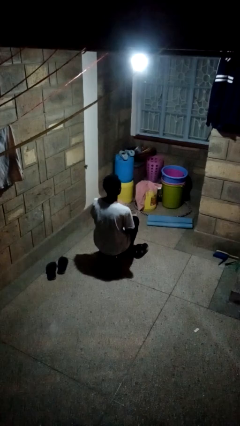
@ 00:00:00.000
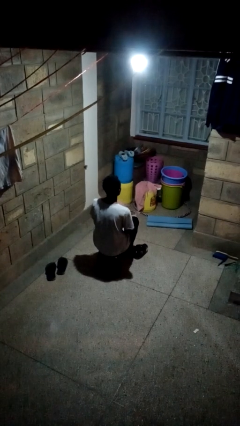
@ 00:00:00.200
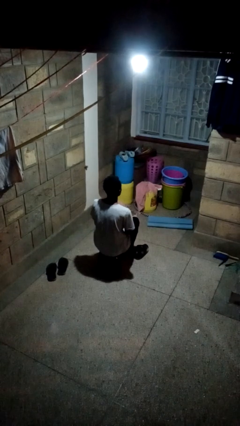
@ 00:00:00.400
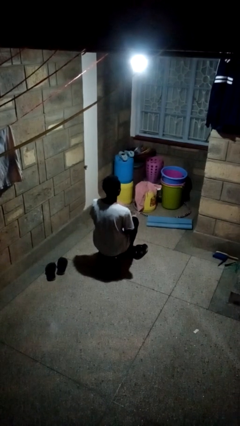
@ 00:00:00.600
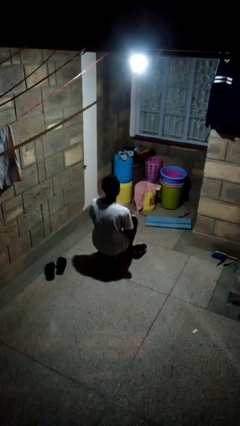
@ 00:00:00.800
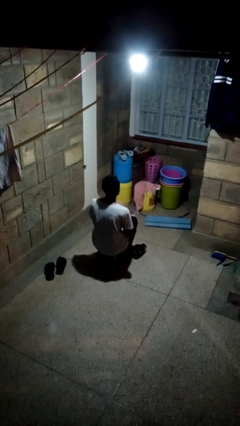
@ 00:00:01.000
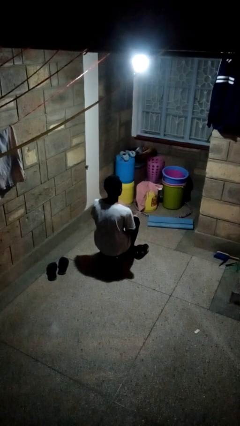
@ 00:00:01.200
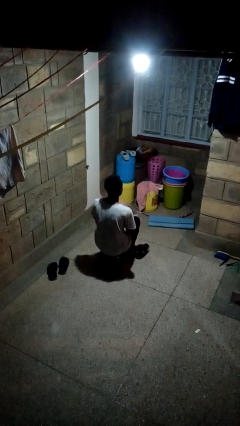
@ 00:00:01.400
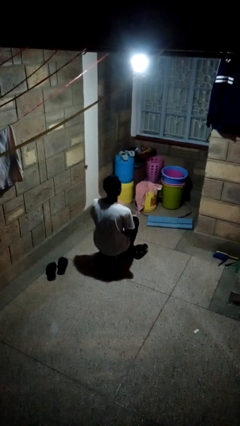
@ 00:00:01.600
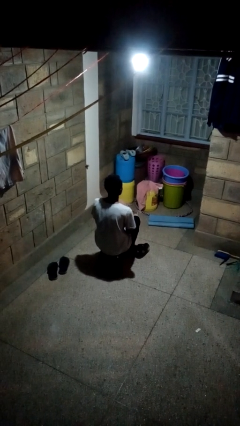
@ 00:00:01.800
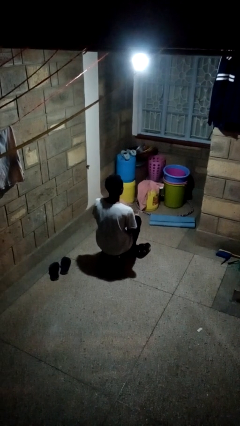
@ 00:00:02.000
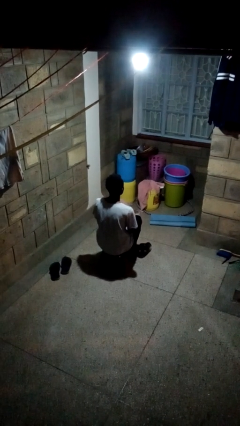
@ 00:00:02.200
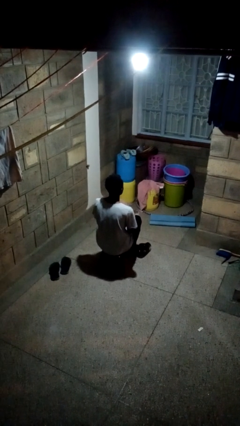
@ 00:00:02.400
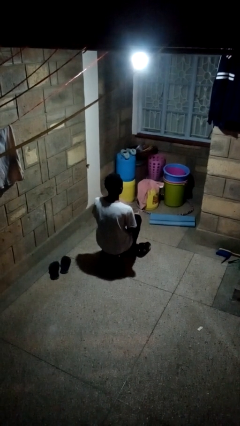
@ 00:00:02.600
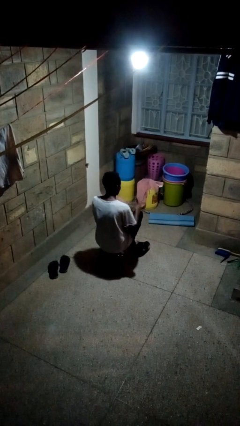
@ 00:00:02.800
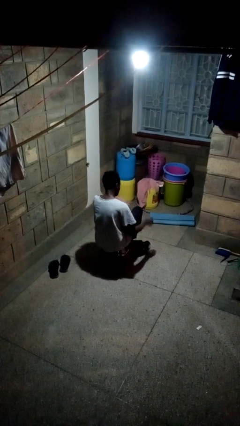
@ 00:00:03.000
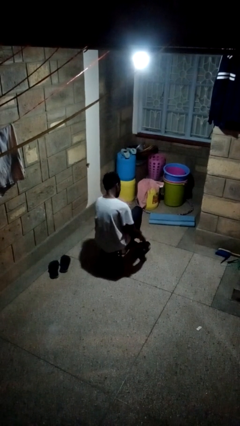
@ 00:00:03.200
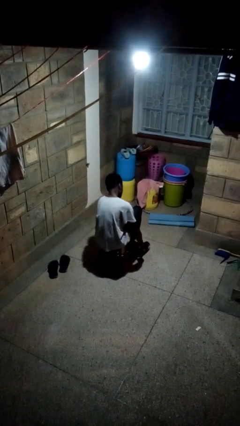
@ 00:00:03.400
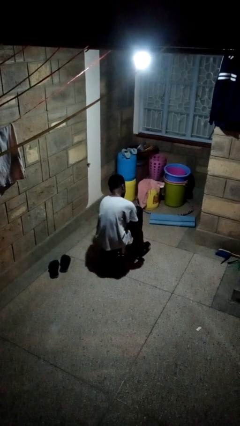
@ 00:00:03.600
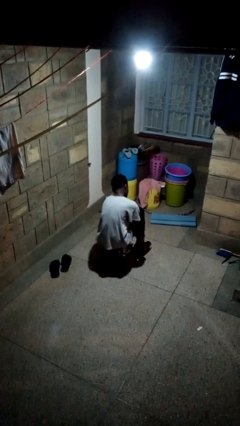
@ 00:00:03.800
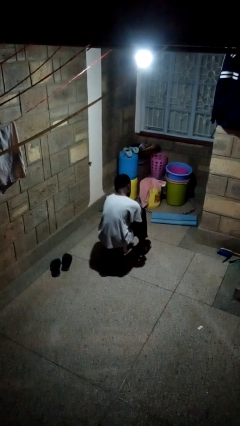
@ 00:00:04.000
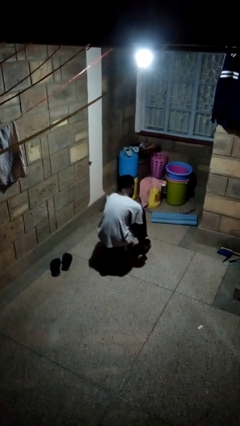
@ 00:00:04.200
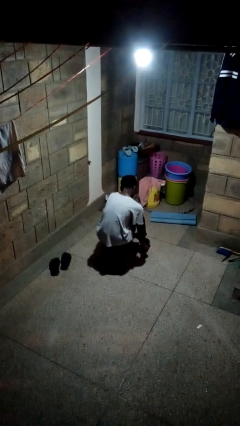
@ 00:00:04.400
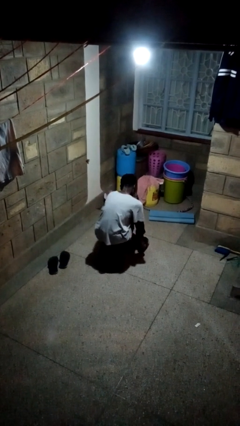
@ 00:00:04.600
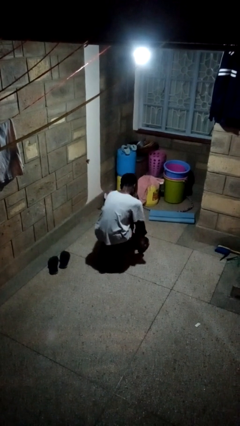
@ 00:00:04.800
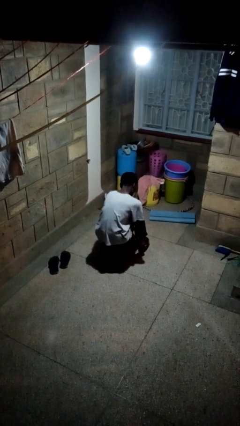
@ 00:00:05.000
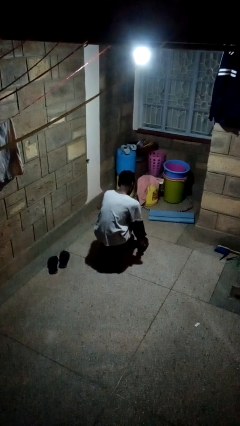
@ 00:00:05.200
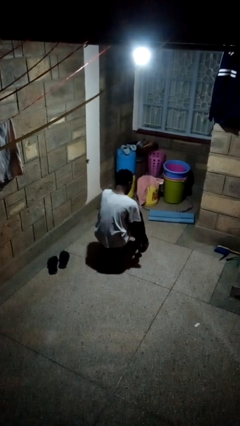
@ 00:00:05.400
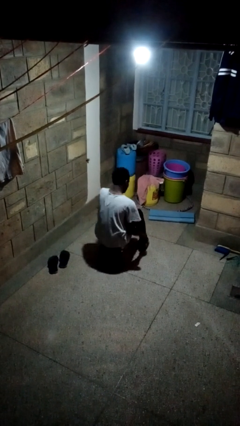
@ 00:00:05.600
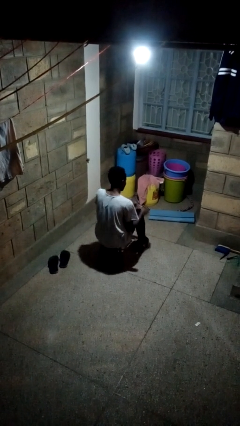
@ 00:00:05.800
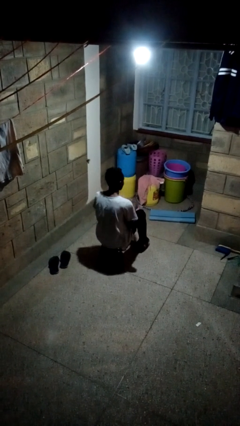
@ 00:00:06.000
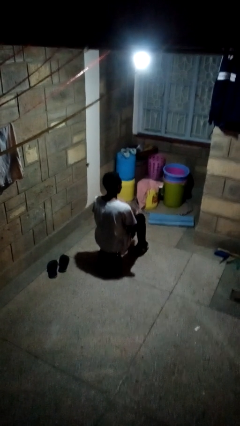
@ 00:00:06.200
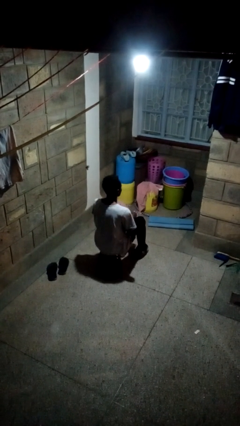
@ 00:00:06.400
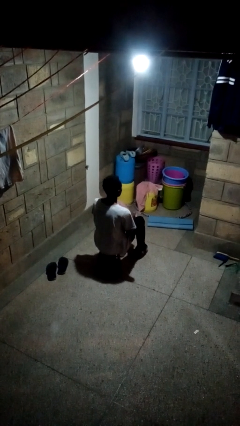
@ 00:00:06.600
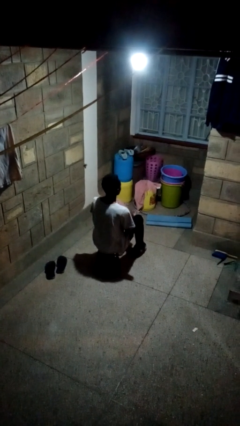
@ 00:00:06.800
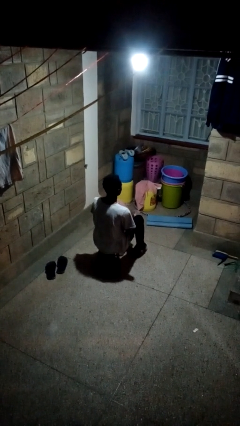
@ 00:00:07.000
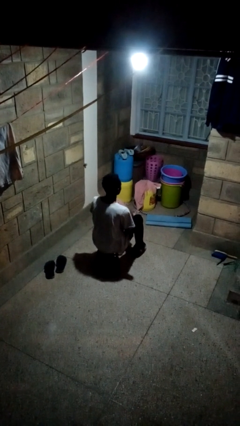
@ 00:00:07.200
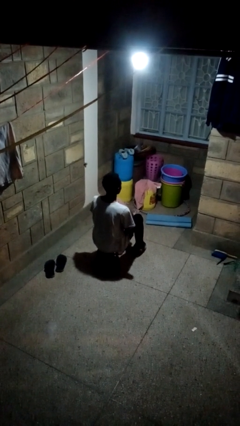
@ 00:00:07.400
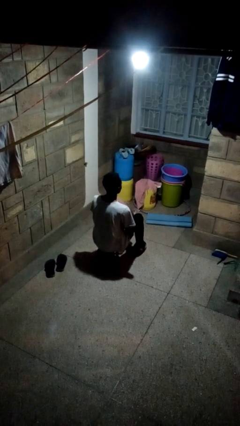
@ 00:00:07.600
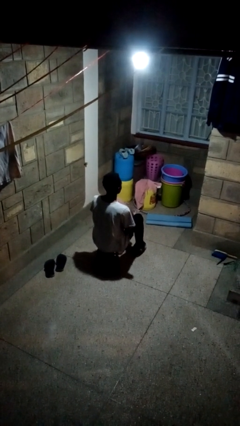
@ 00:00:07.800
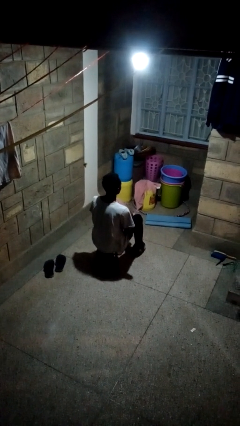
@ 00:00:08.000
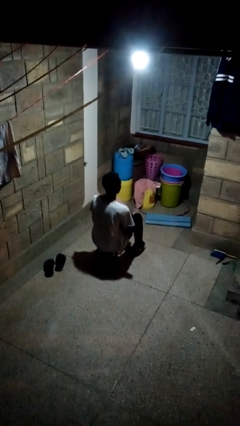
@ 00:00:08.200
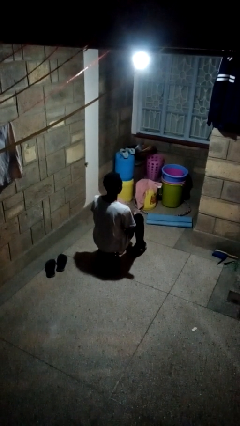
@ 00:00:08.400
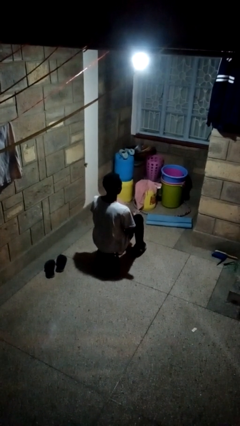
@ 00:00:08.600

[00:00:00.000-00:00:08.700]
person puts on shoes

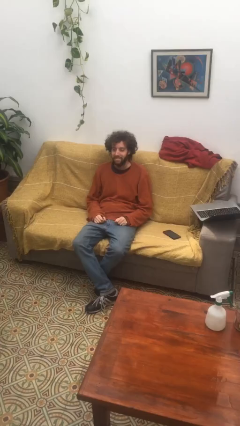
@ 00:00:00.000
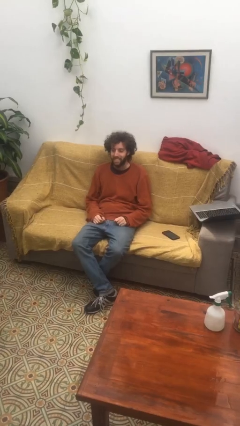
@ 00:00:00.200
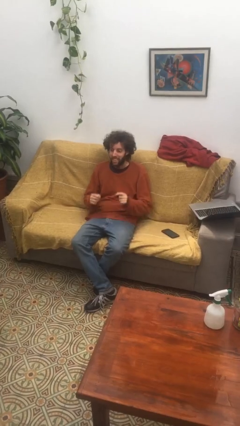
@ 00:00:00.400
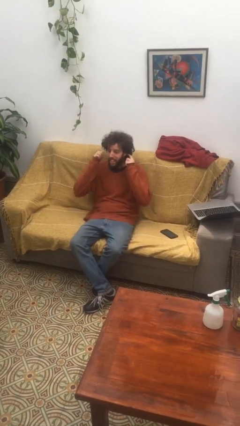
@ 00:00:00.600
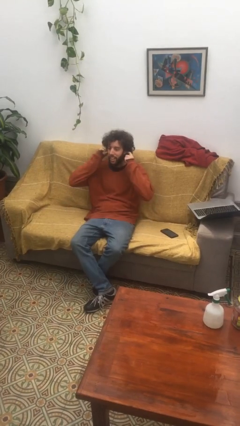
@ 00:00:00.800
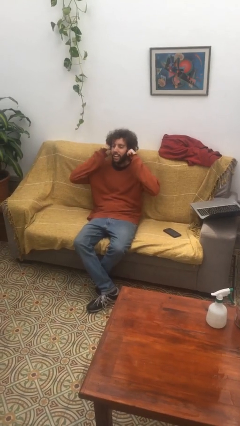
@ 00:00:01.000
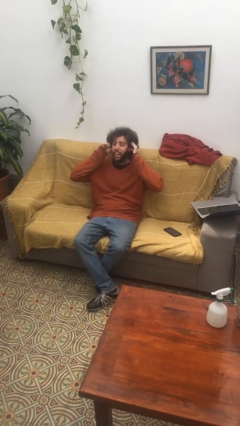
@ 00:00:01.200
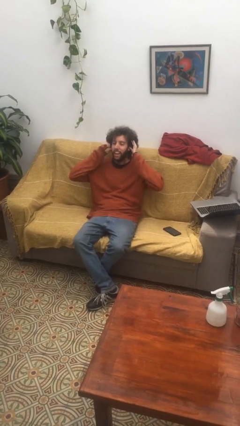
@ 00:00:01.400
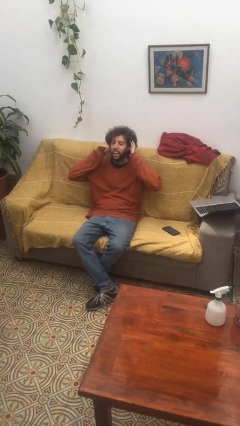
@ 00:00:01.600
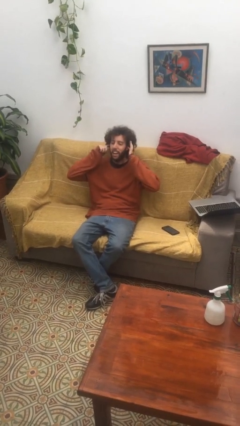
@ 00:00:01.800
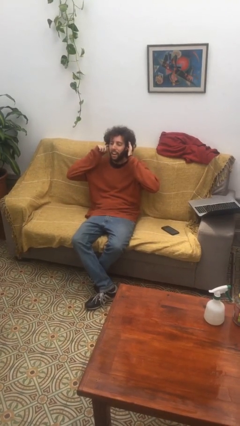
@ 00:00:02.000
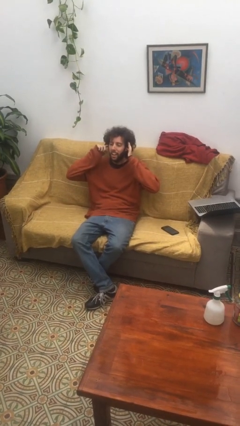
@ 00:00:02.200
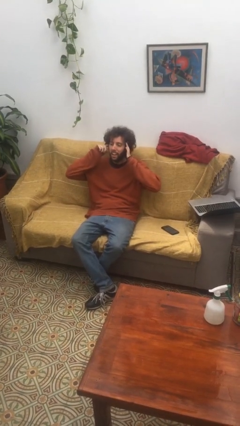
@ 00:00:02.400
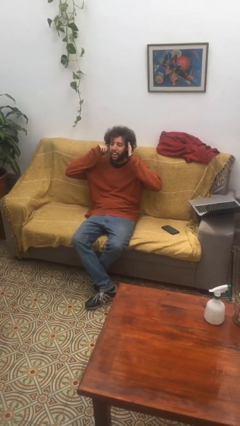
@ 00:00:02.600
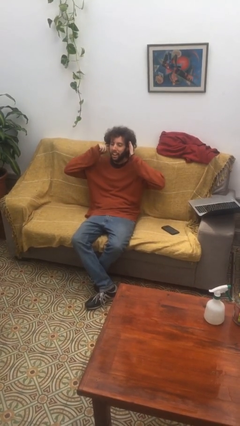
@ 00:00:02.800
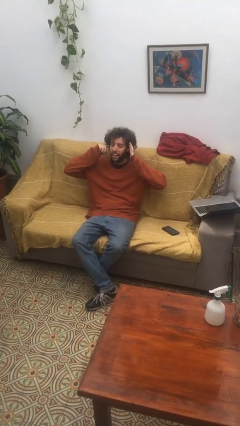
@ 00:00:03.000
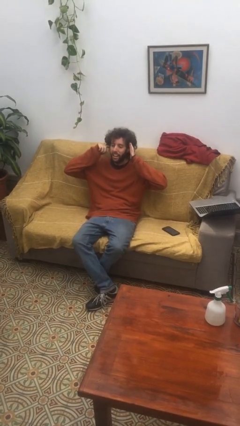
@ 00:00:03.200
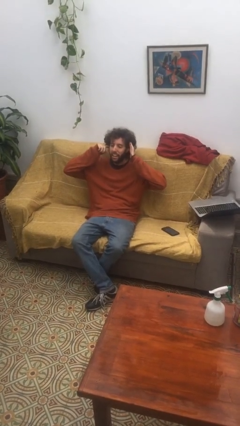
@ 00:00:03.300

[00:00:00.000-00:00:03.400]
person puts fingers in ear

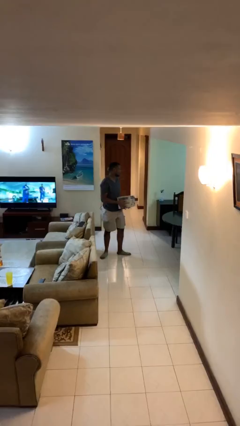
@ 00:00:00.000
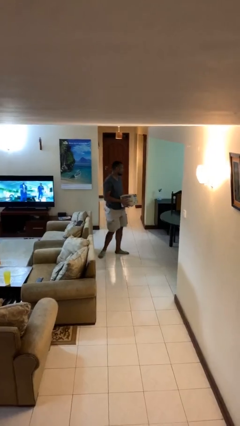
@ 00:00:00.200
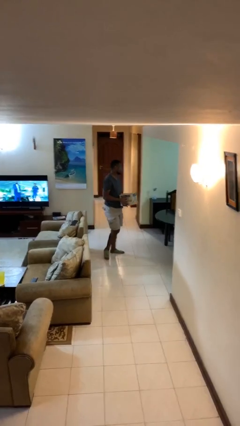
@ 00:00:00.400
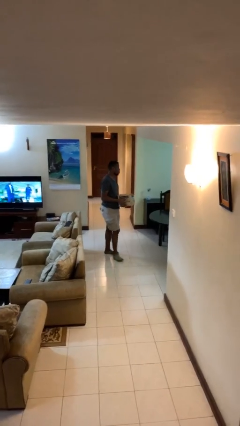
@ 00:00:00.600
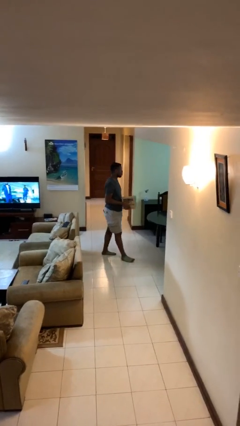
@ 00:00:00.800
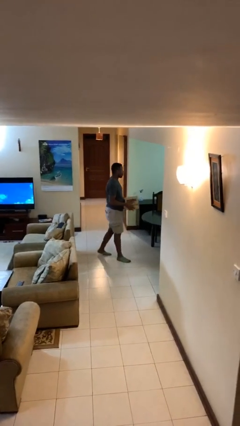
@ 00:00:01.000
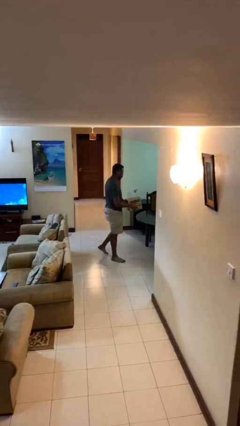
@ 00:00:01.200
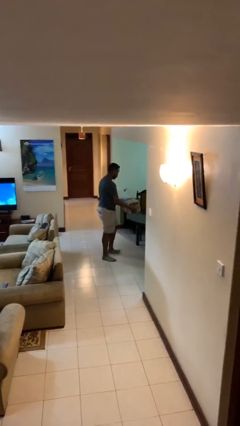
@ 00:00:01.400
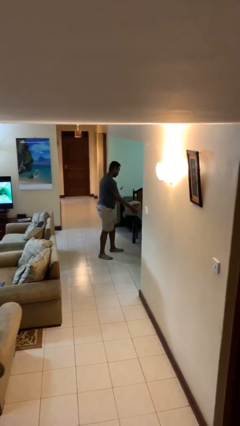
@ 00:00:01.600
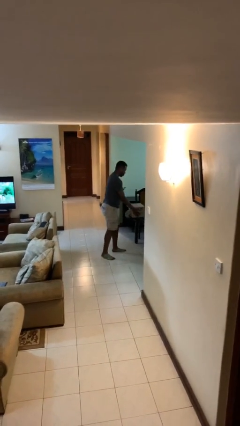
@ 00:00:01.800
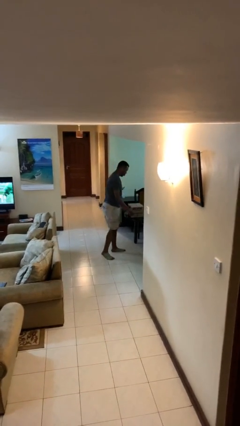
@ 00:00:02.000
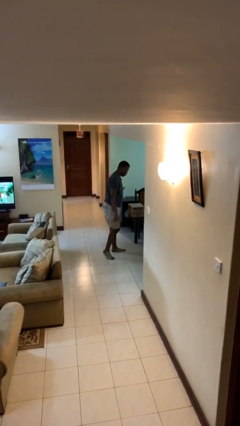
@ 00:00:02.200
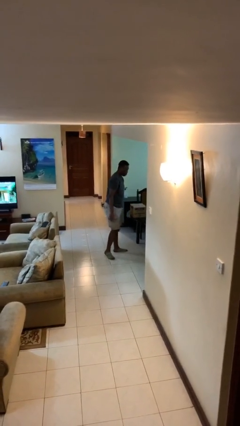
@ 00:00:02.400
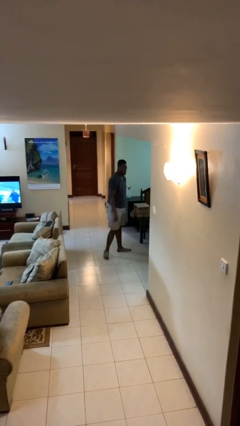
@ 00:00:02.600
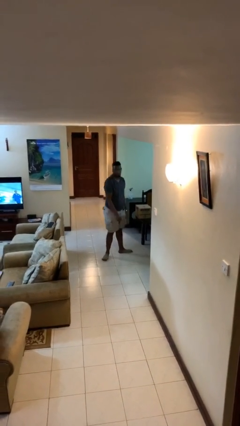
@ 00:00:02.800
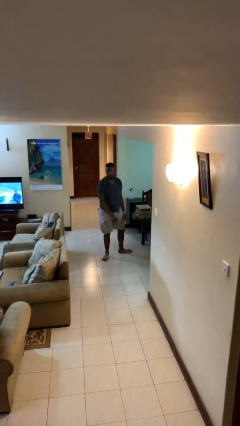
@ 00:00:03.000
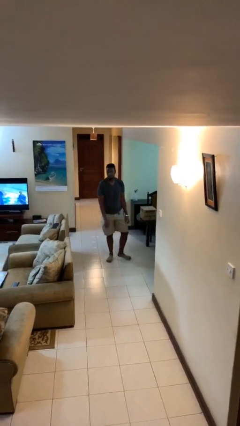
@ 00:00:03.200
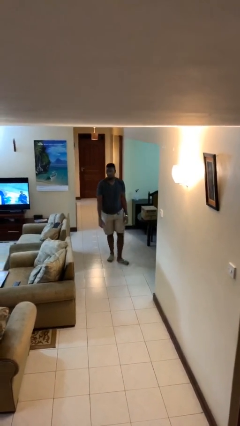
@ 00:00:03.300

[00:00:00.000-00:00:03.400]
person puts down object on table

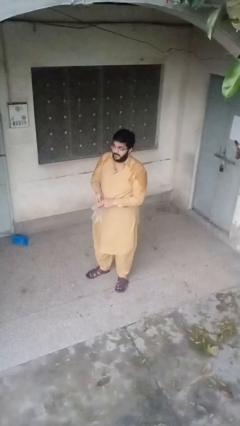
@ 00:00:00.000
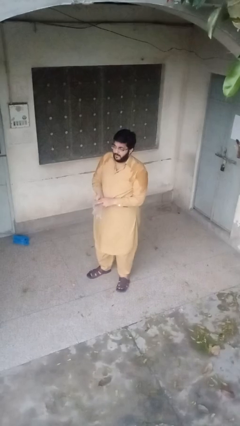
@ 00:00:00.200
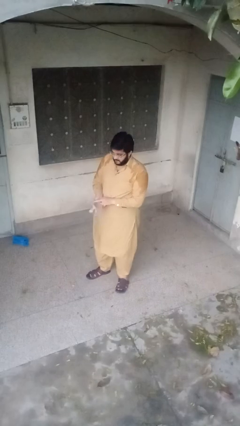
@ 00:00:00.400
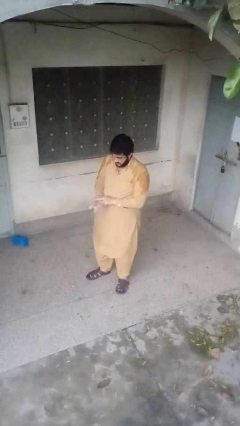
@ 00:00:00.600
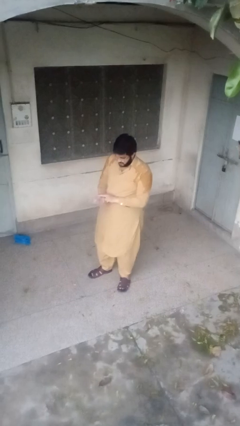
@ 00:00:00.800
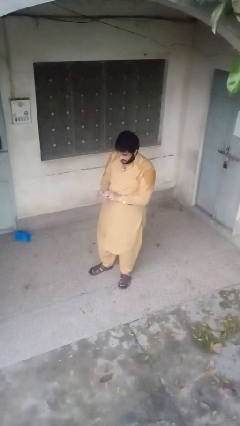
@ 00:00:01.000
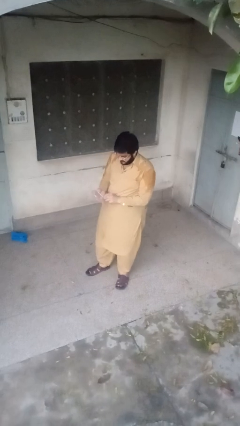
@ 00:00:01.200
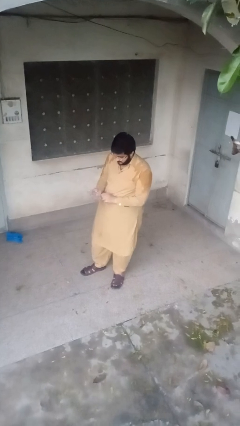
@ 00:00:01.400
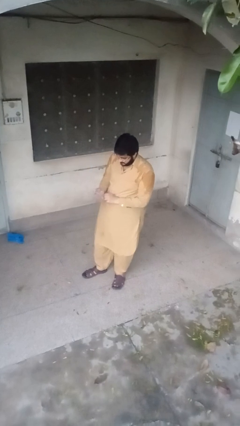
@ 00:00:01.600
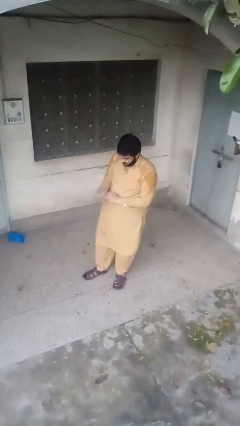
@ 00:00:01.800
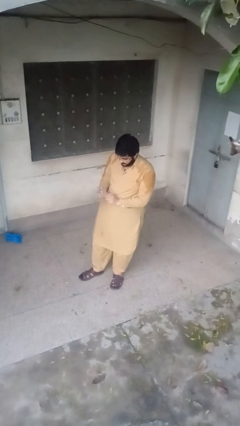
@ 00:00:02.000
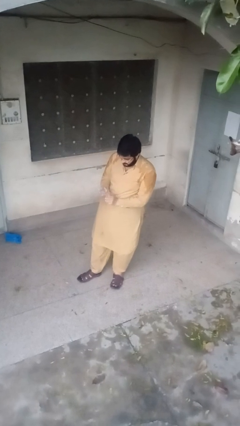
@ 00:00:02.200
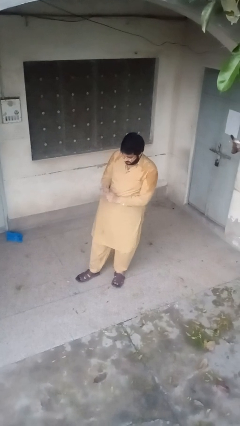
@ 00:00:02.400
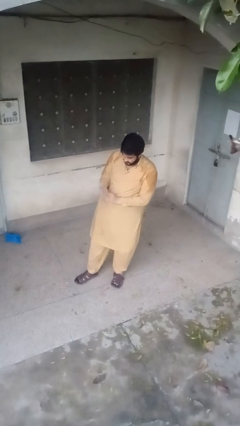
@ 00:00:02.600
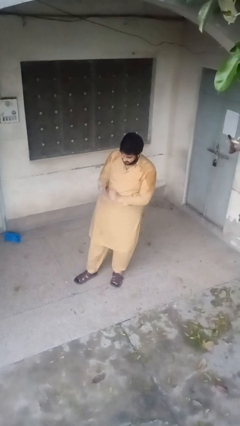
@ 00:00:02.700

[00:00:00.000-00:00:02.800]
person puts on gloves
